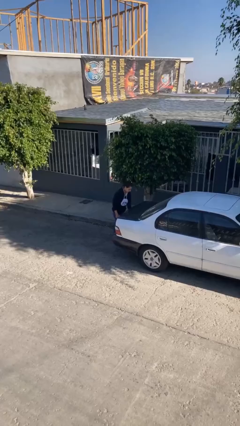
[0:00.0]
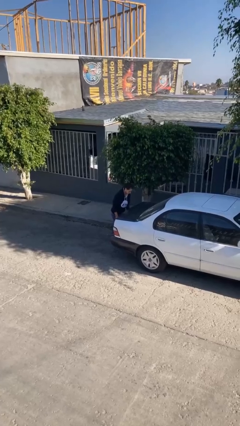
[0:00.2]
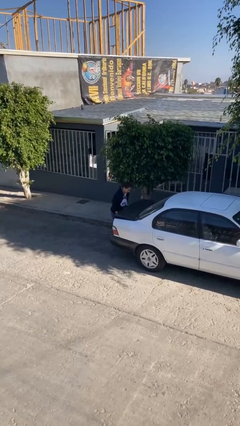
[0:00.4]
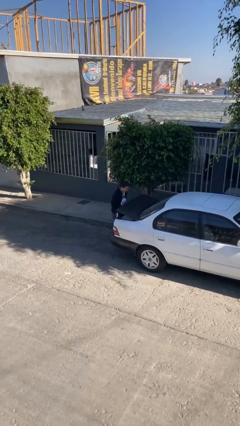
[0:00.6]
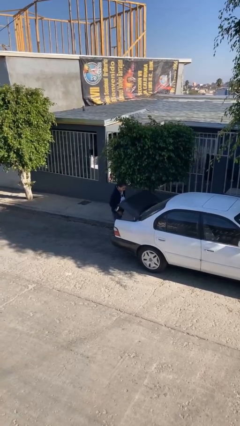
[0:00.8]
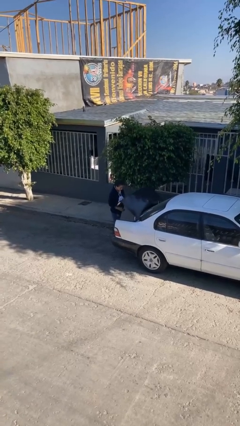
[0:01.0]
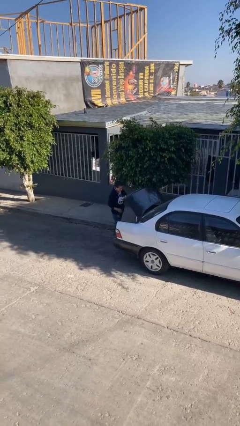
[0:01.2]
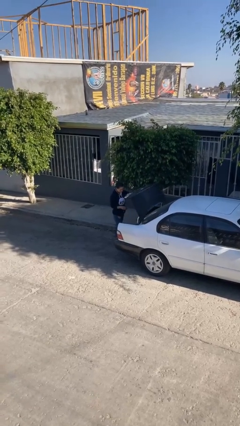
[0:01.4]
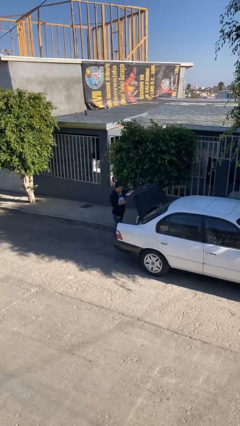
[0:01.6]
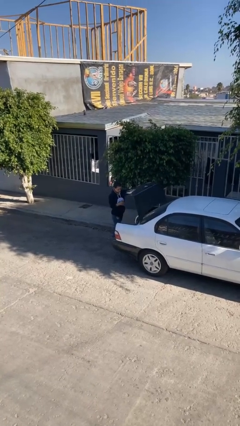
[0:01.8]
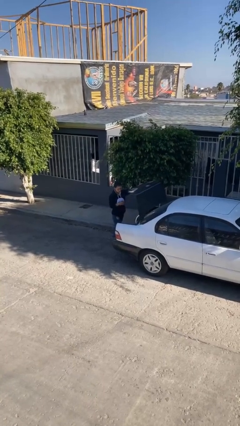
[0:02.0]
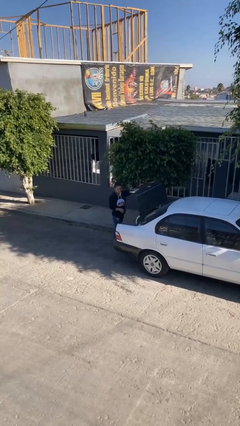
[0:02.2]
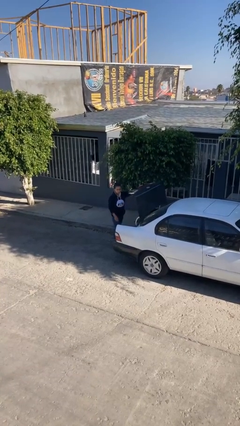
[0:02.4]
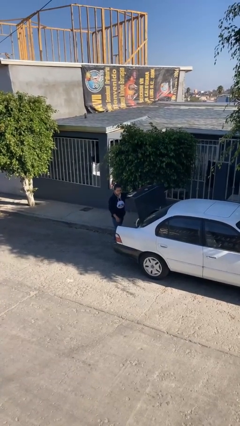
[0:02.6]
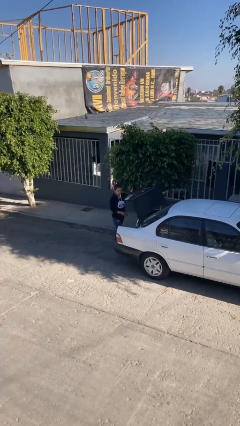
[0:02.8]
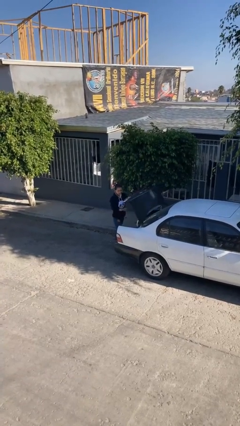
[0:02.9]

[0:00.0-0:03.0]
person opens car trunk

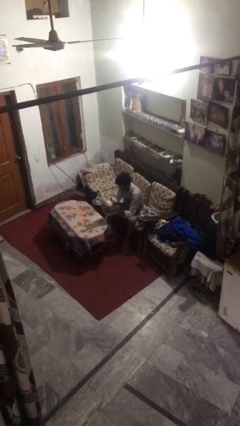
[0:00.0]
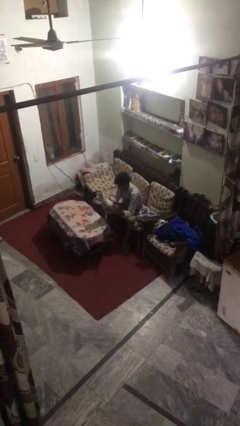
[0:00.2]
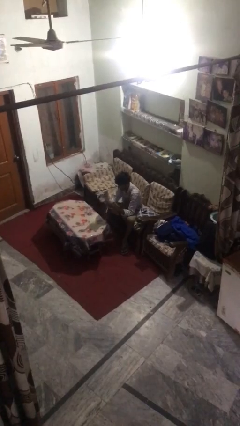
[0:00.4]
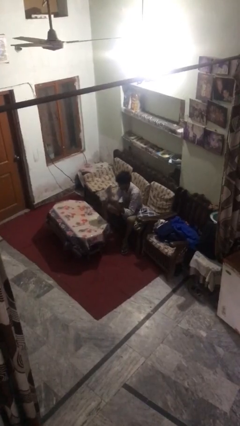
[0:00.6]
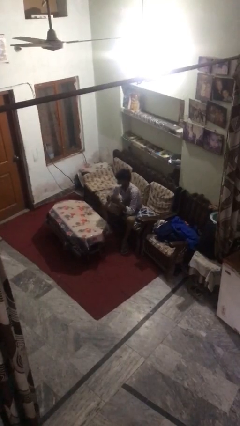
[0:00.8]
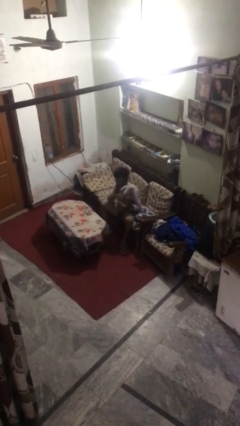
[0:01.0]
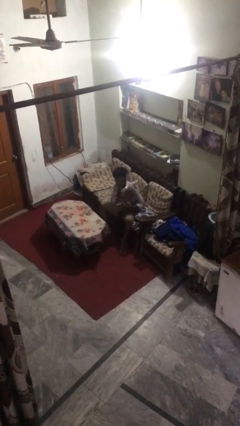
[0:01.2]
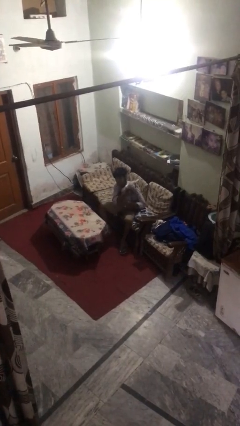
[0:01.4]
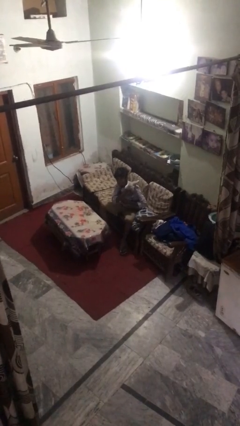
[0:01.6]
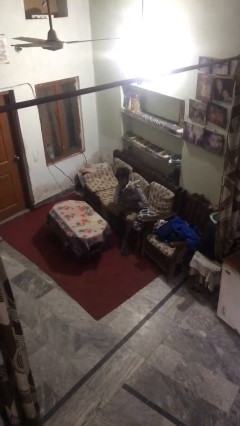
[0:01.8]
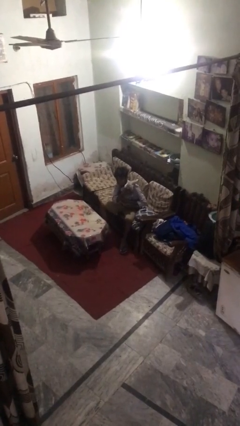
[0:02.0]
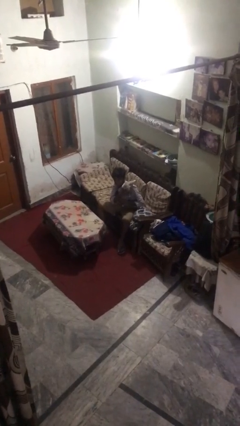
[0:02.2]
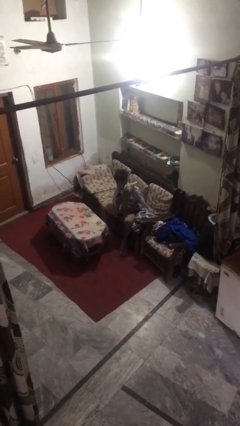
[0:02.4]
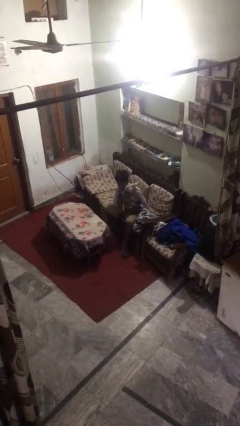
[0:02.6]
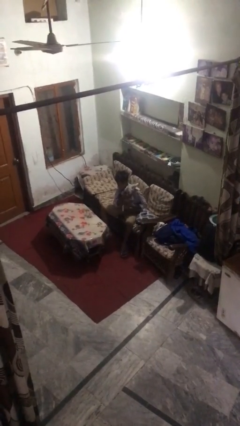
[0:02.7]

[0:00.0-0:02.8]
person hugs stuffed animal

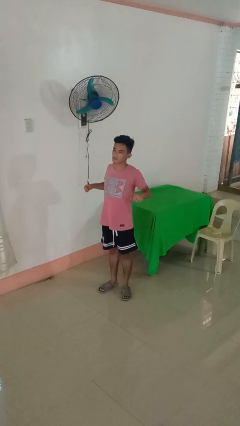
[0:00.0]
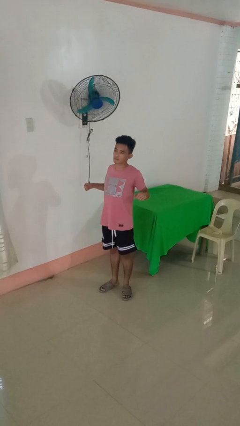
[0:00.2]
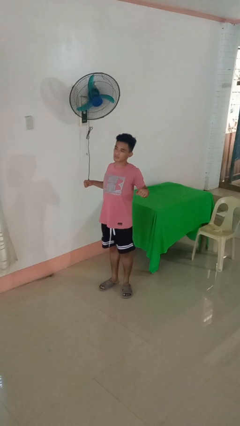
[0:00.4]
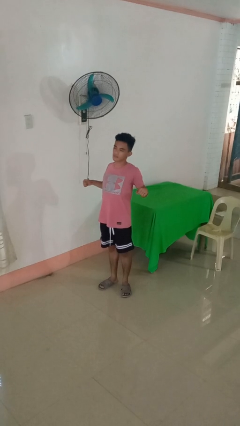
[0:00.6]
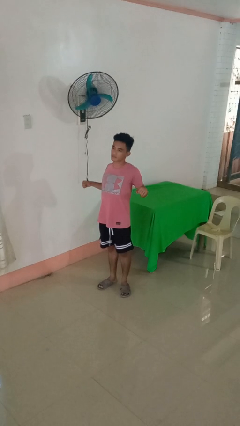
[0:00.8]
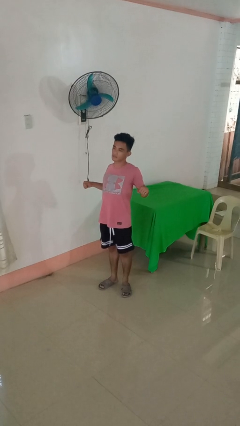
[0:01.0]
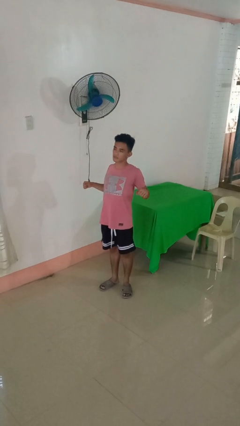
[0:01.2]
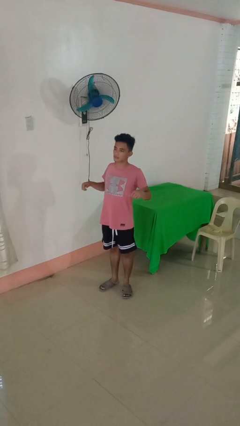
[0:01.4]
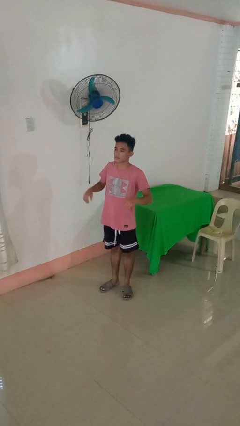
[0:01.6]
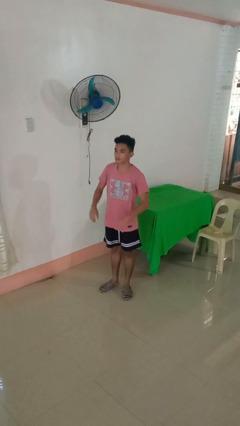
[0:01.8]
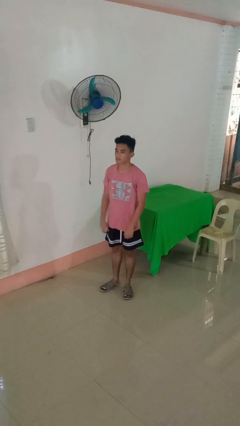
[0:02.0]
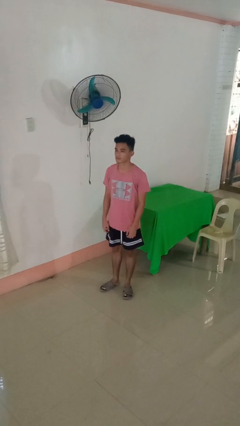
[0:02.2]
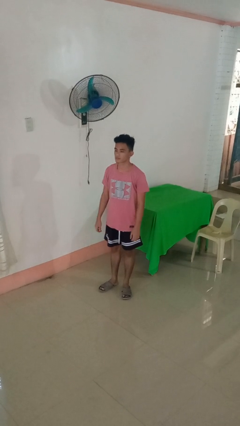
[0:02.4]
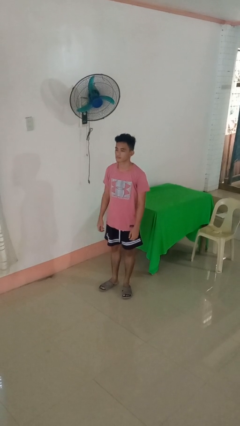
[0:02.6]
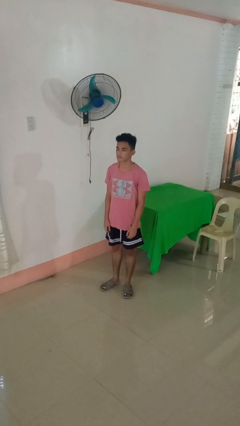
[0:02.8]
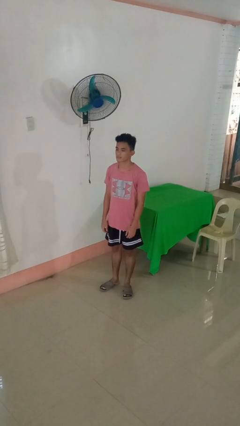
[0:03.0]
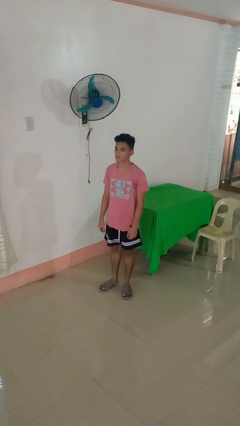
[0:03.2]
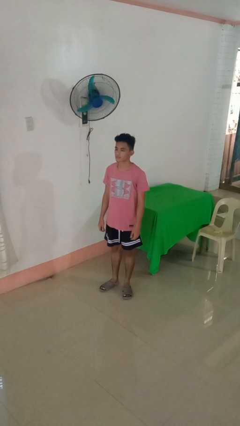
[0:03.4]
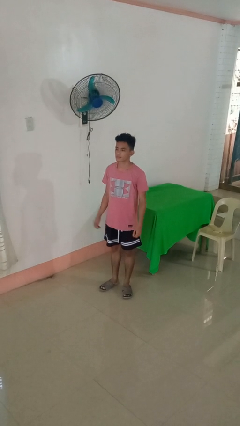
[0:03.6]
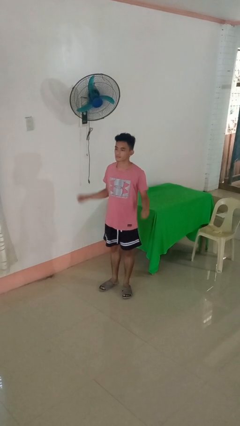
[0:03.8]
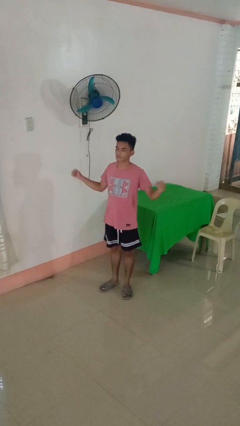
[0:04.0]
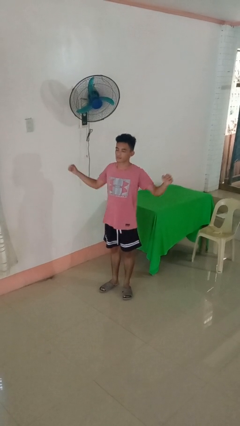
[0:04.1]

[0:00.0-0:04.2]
person stretches back

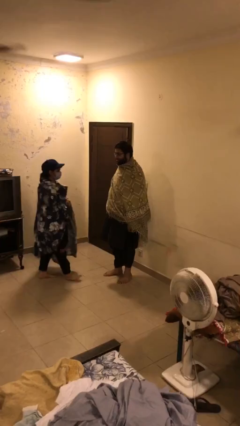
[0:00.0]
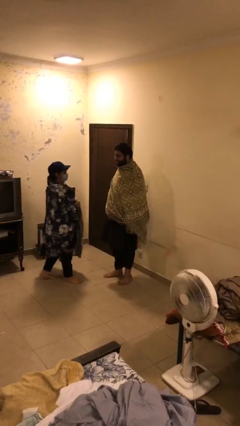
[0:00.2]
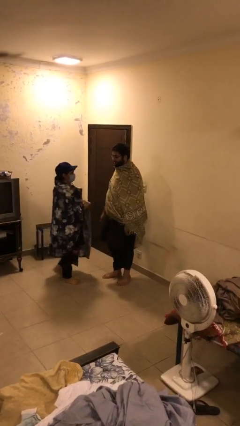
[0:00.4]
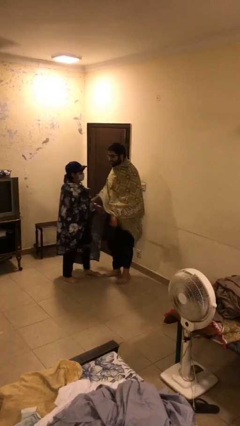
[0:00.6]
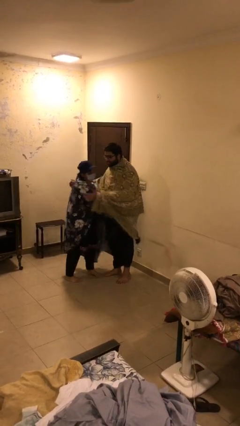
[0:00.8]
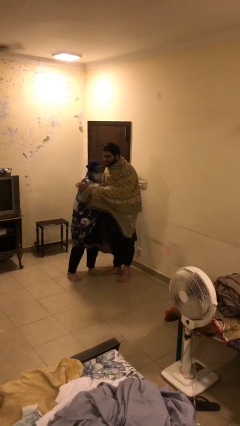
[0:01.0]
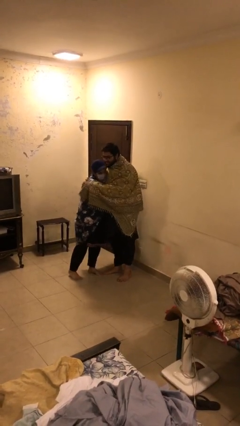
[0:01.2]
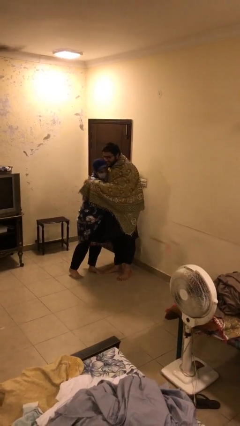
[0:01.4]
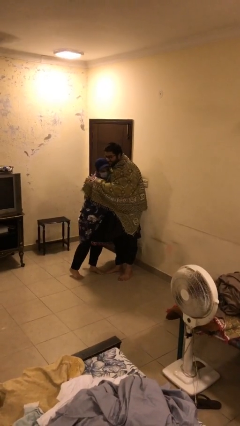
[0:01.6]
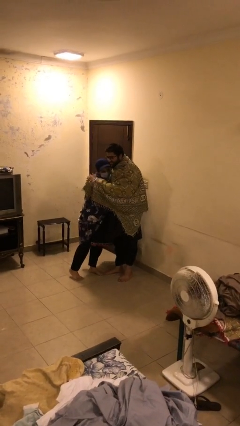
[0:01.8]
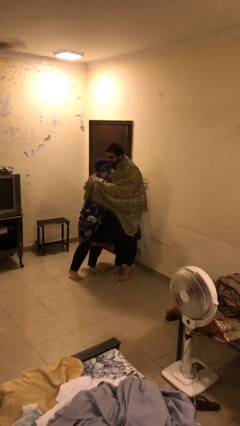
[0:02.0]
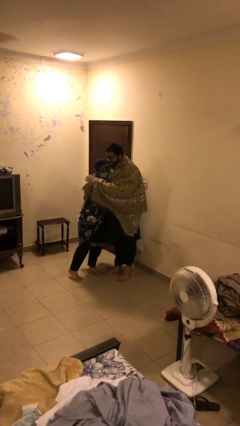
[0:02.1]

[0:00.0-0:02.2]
person embraces person

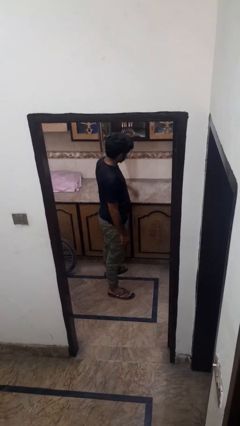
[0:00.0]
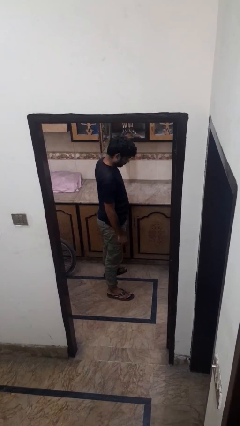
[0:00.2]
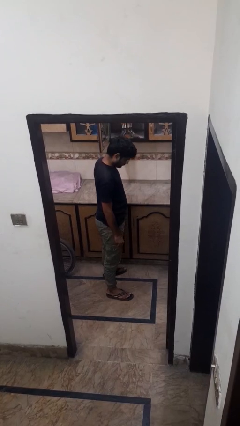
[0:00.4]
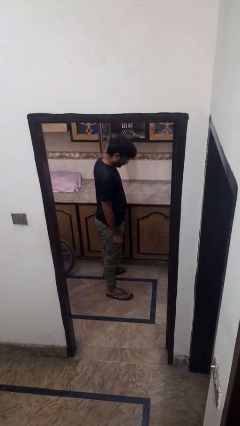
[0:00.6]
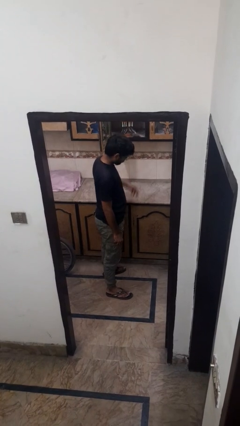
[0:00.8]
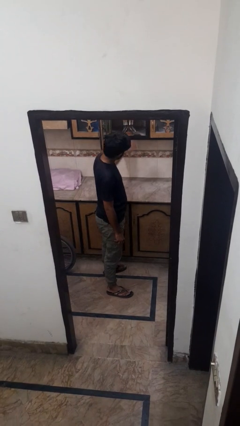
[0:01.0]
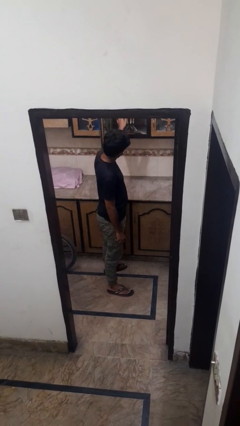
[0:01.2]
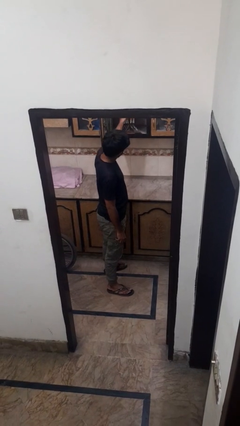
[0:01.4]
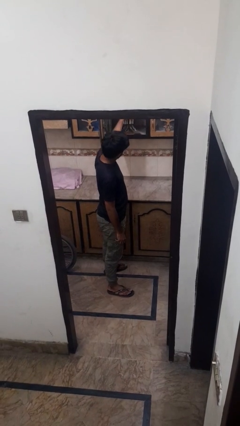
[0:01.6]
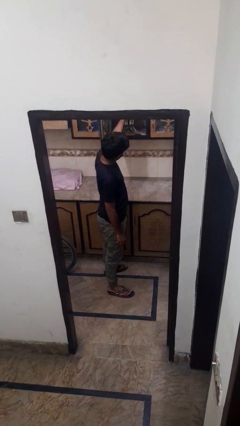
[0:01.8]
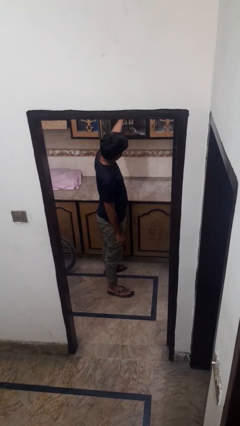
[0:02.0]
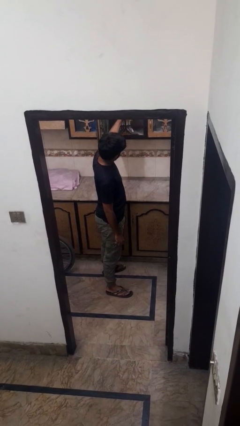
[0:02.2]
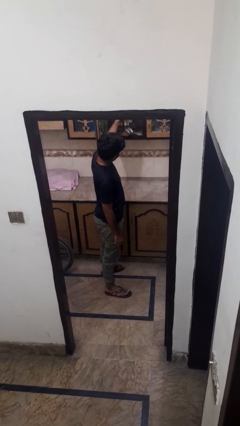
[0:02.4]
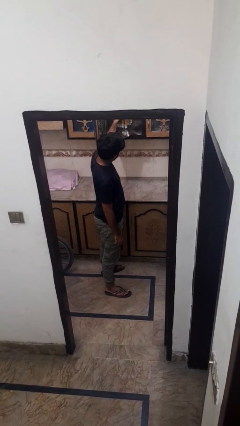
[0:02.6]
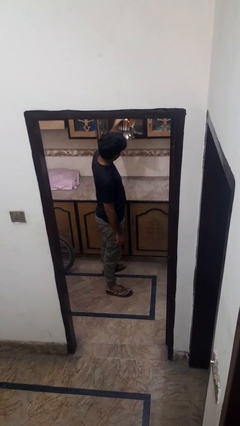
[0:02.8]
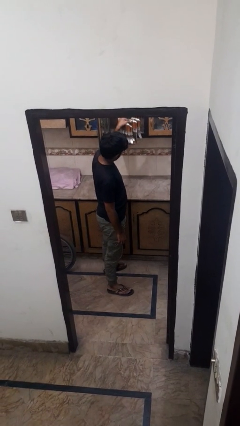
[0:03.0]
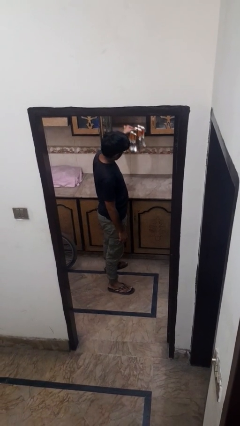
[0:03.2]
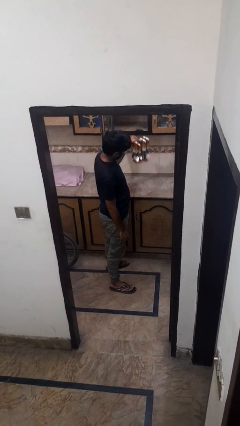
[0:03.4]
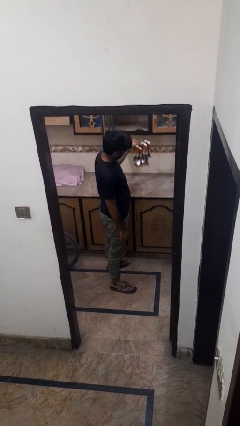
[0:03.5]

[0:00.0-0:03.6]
person picks up object from cabinet

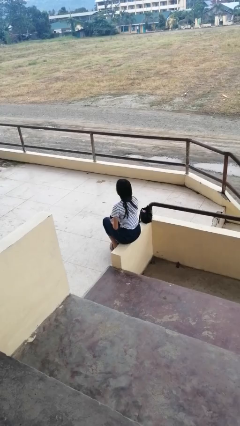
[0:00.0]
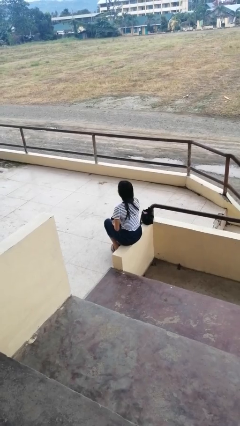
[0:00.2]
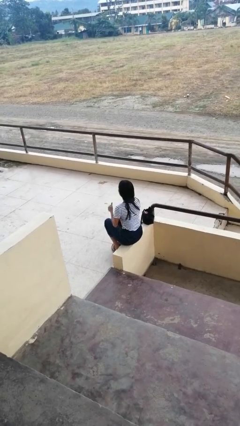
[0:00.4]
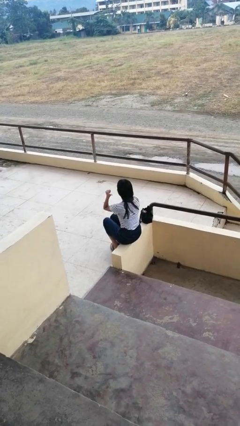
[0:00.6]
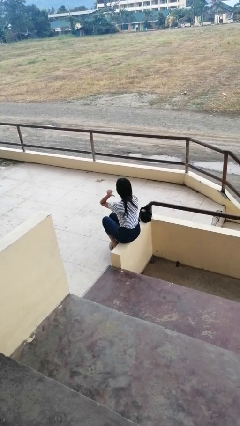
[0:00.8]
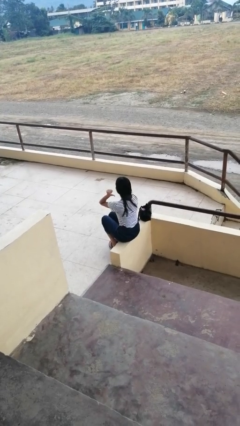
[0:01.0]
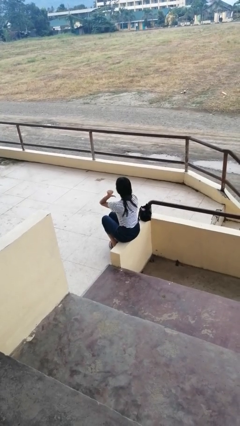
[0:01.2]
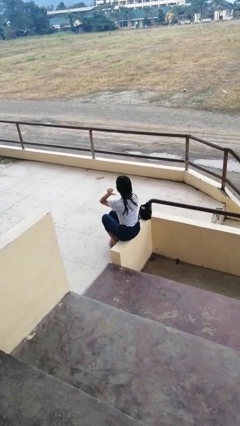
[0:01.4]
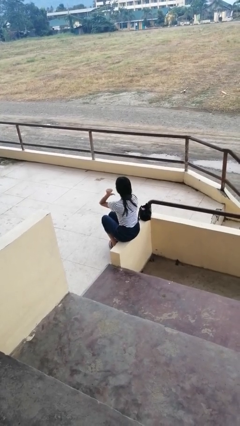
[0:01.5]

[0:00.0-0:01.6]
person gestures behind me
